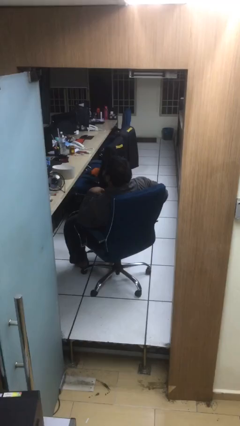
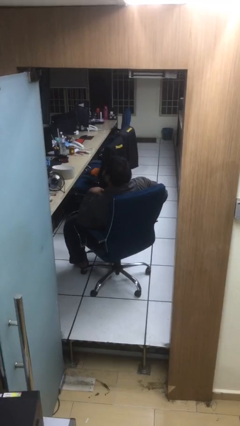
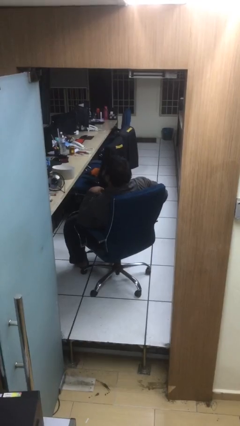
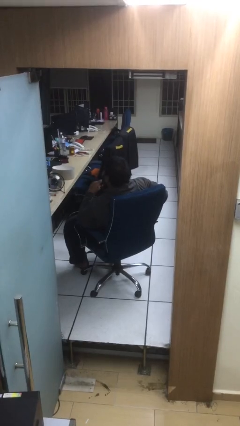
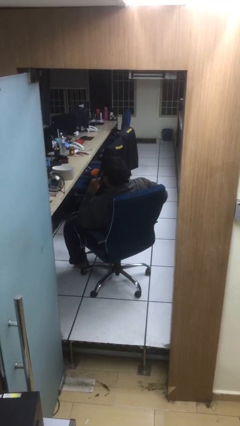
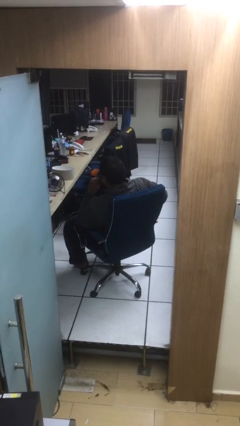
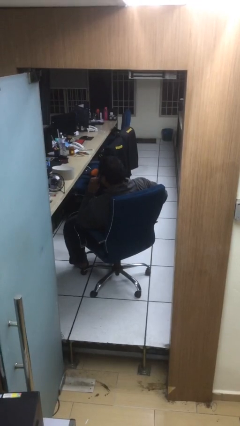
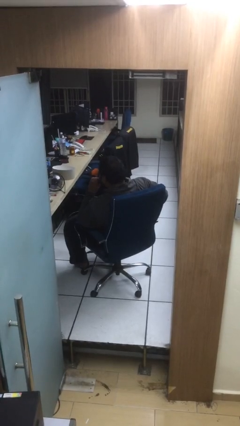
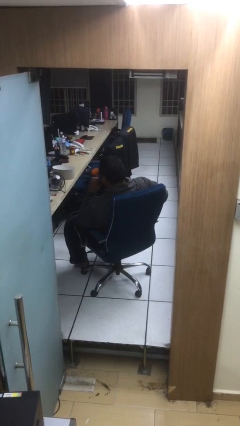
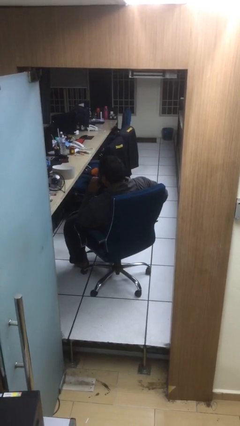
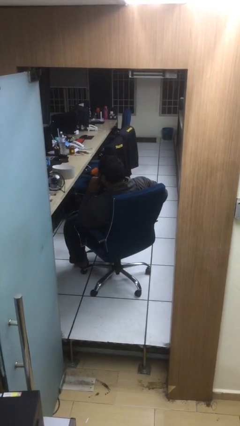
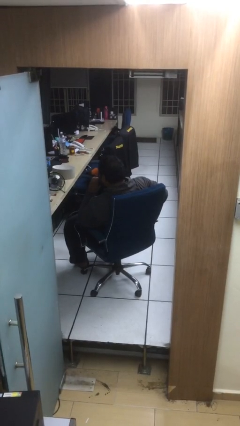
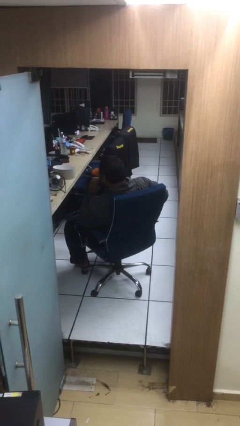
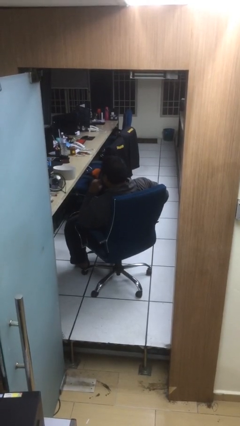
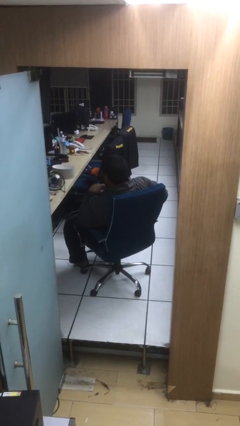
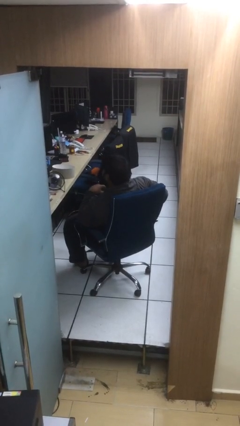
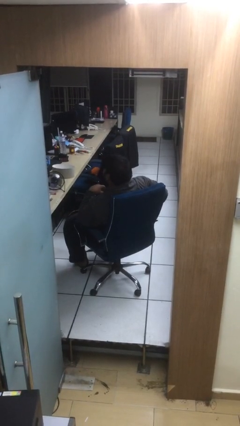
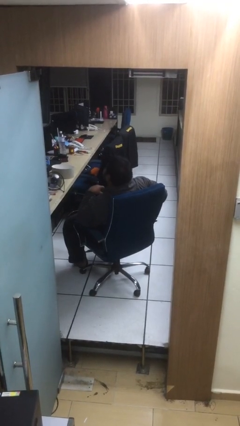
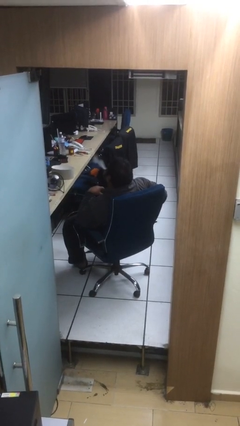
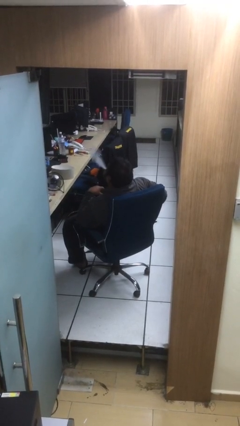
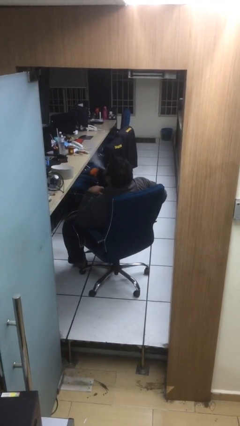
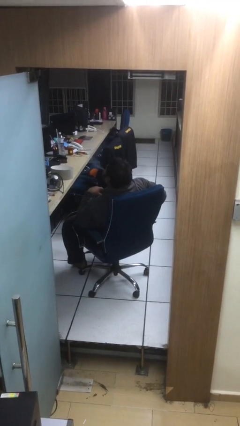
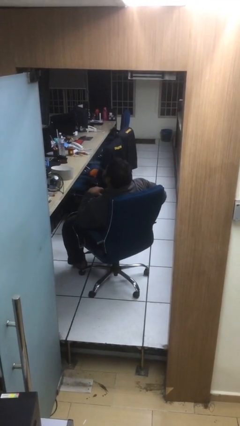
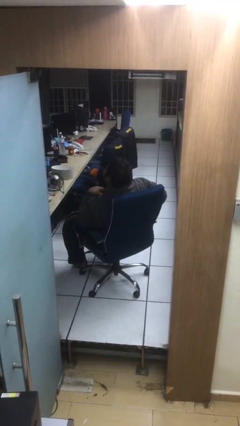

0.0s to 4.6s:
person vapes

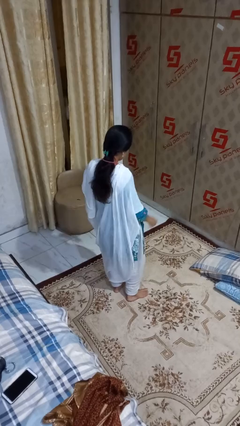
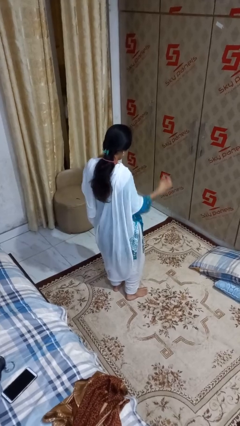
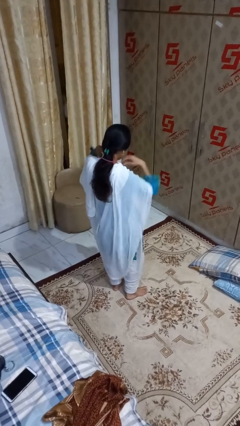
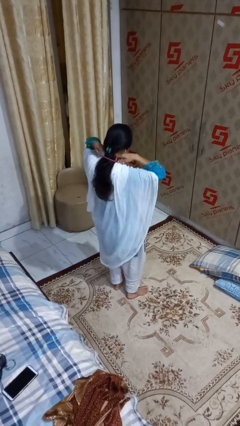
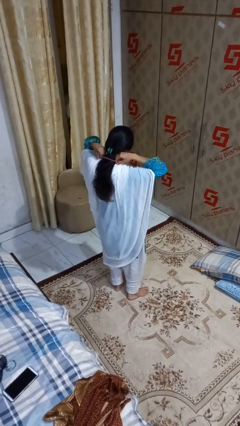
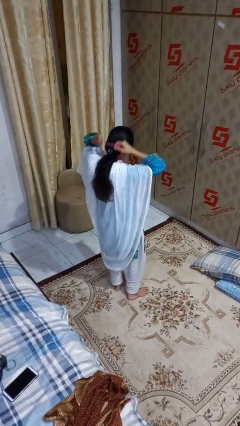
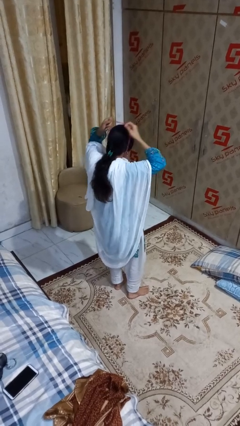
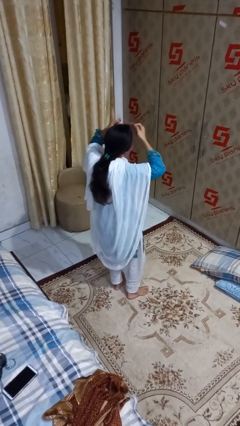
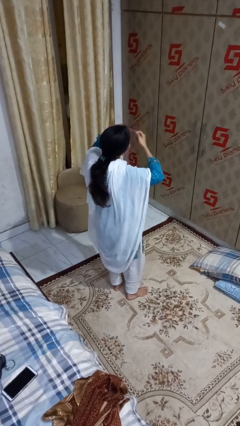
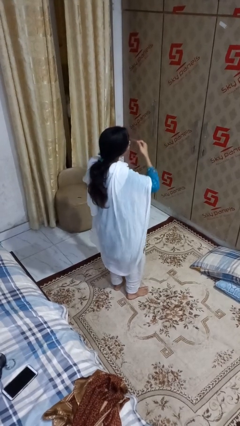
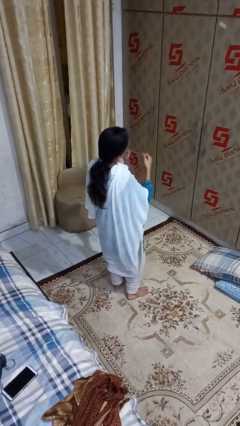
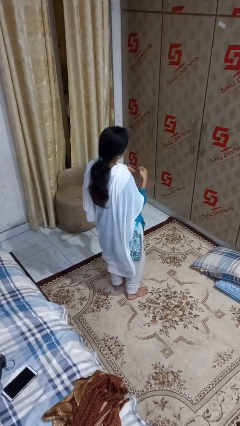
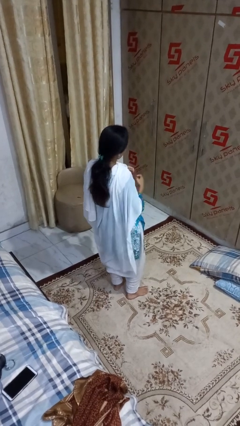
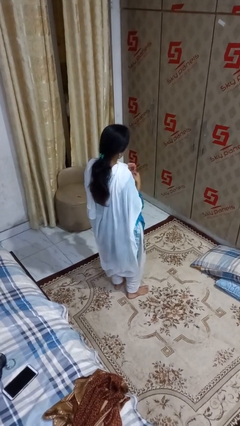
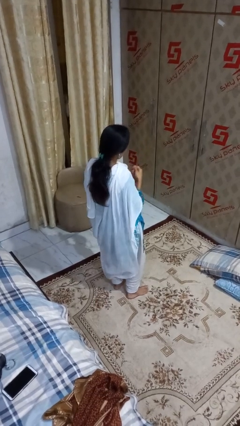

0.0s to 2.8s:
person takes off necklace

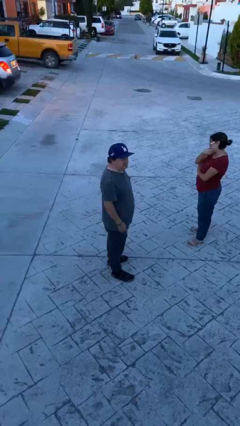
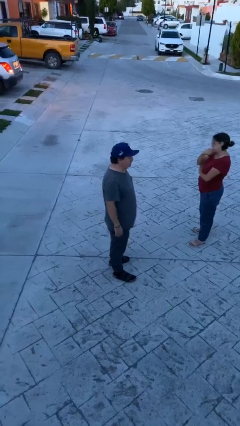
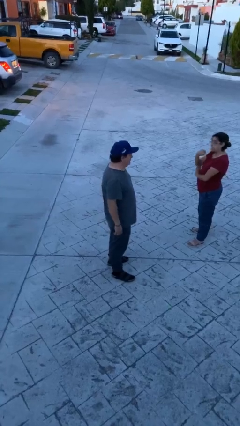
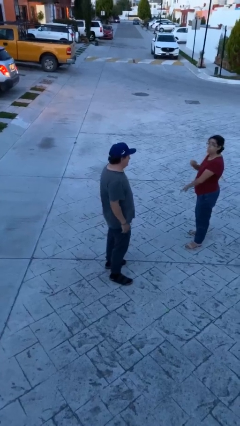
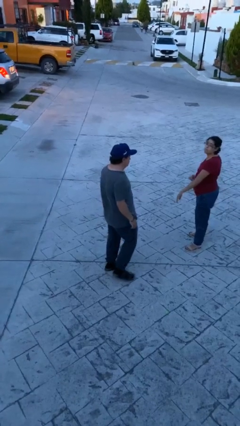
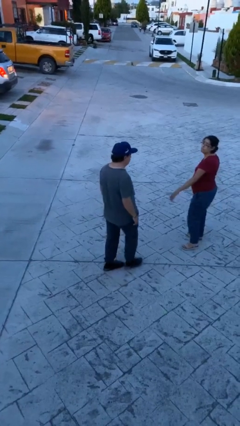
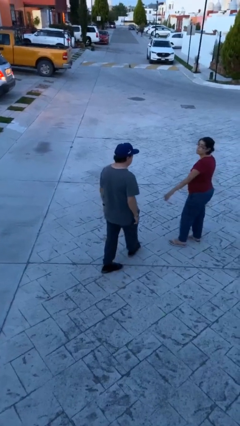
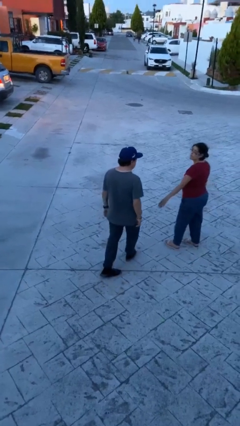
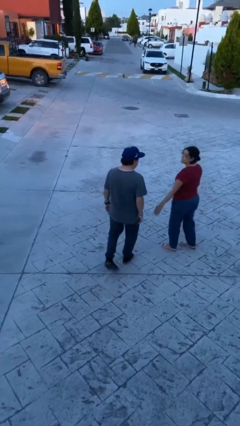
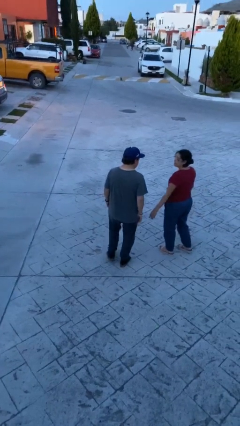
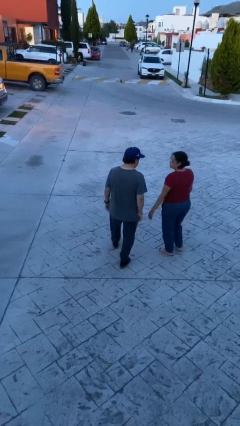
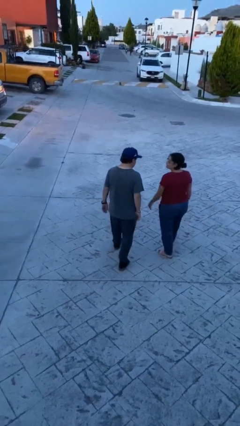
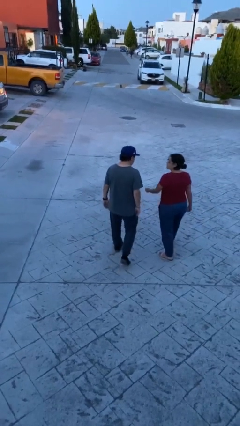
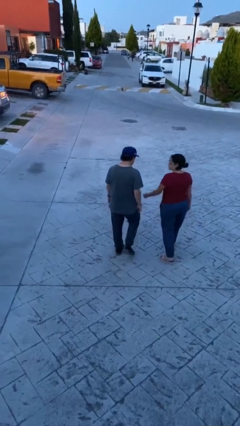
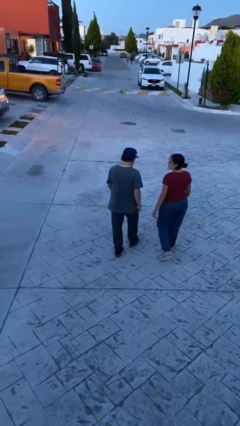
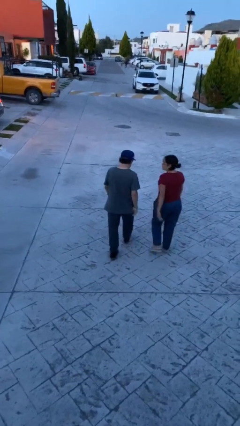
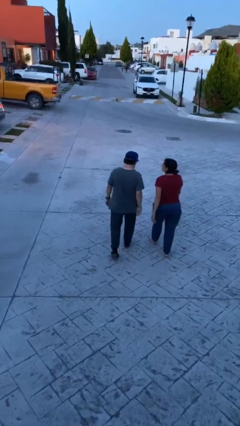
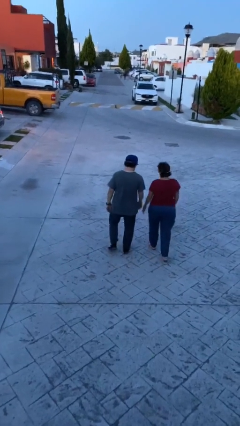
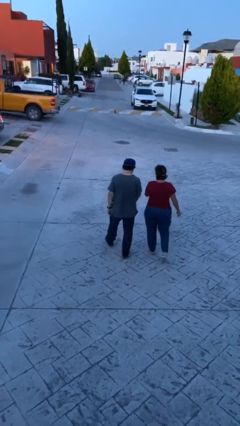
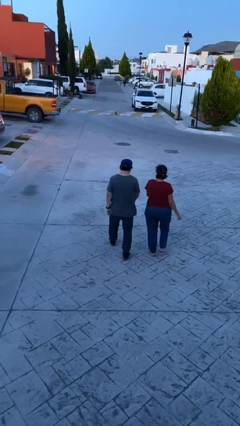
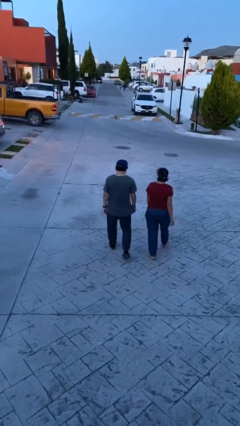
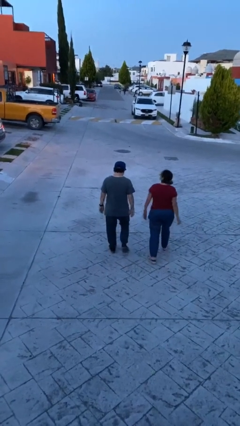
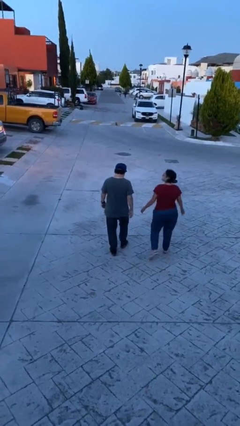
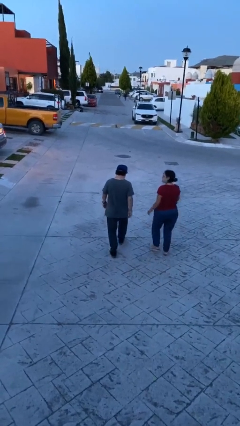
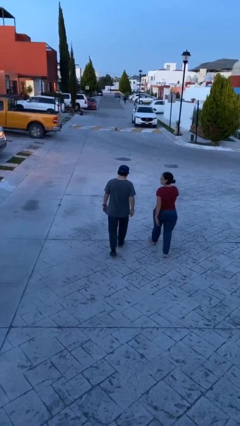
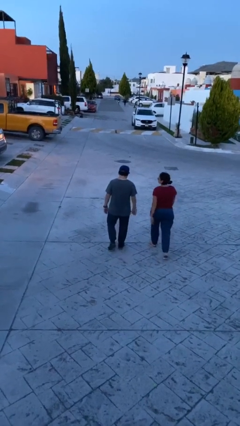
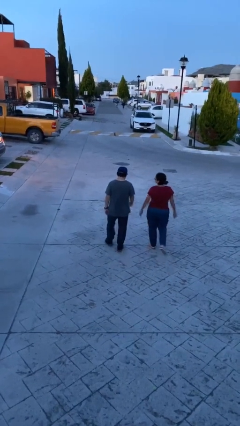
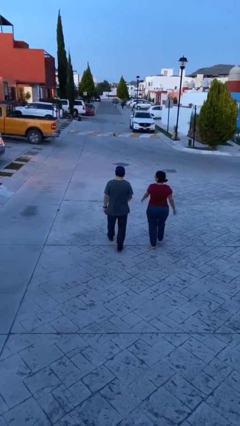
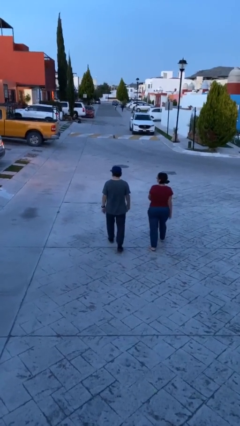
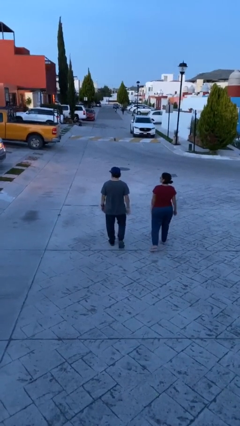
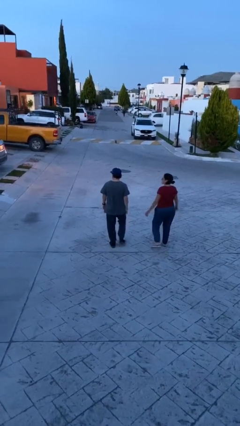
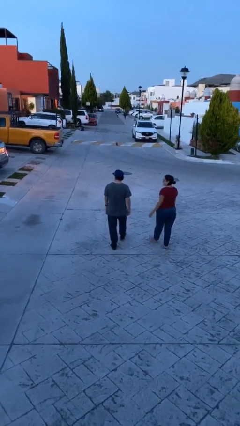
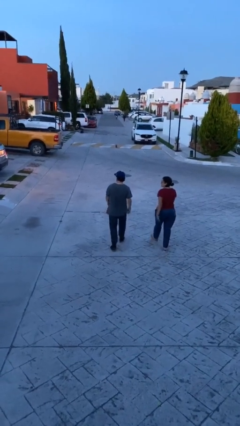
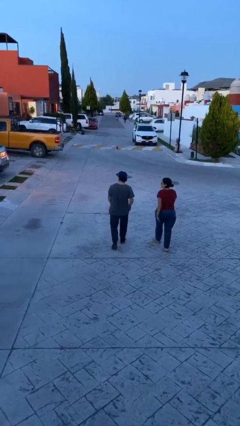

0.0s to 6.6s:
person talks to person

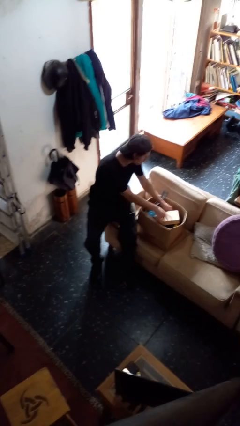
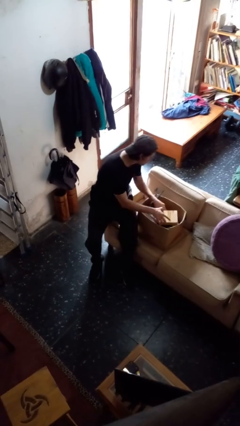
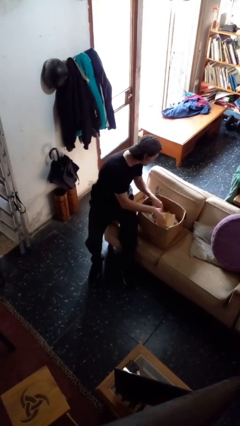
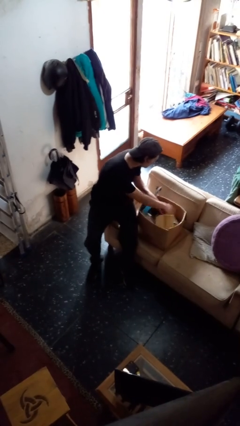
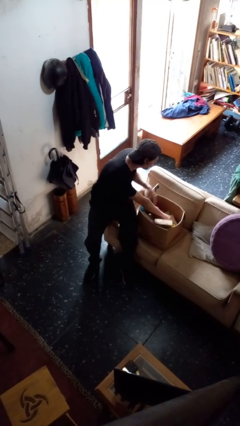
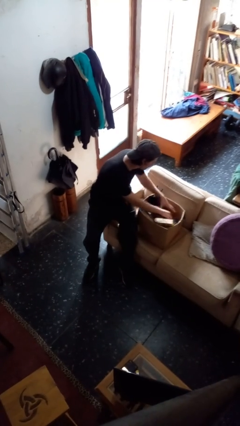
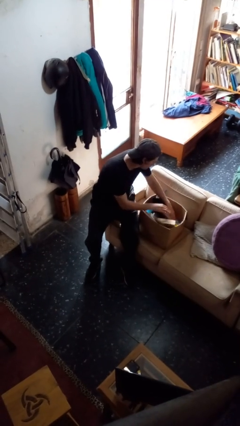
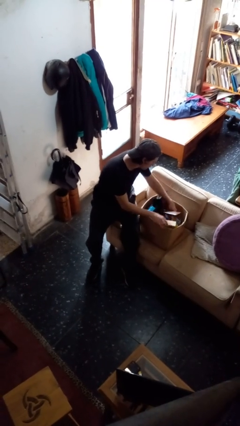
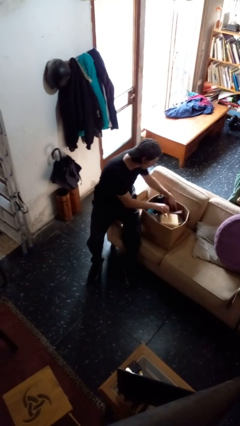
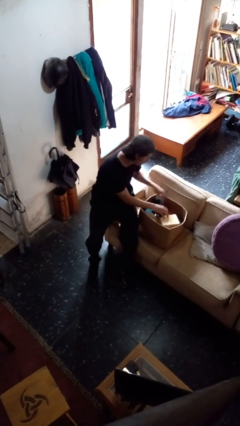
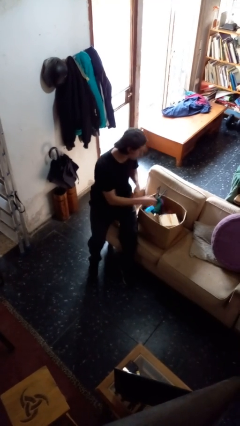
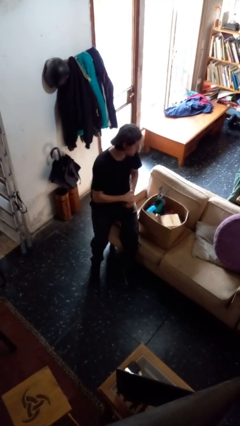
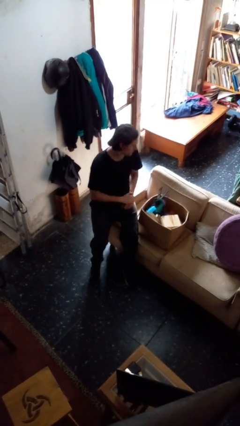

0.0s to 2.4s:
person searches in box

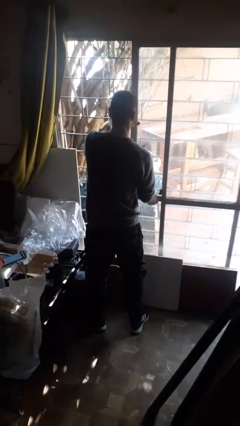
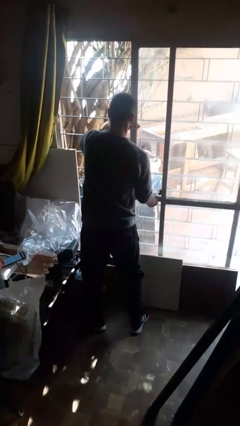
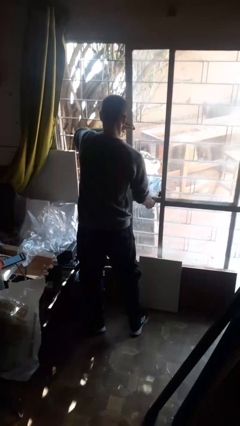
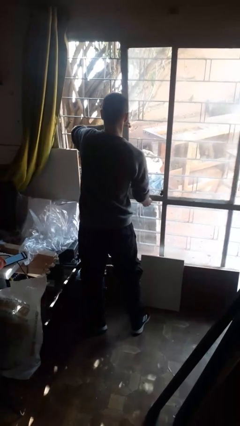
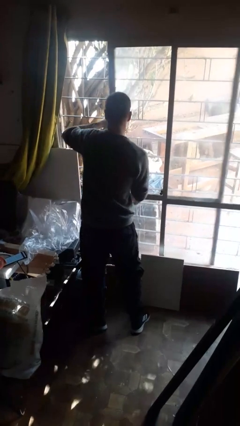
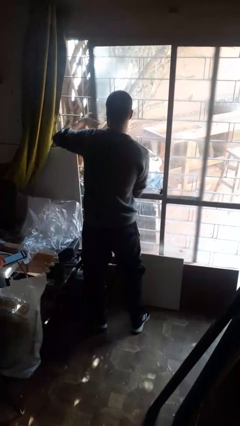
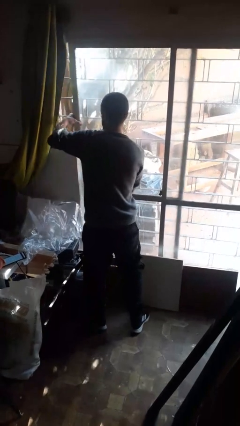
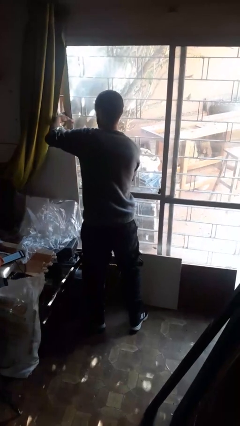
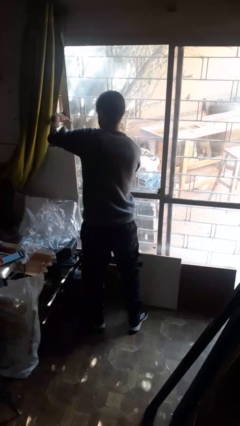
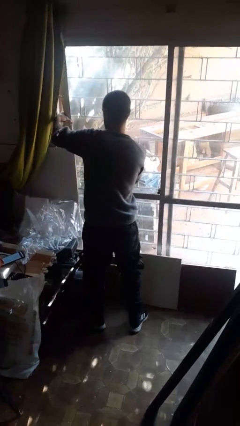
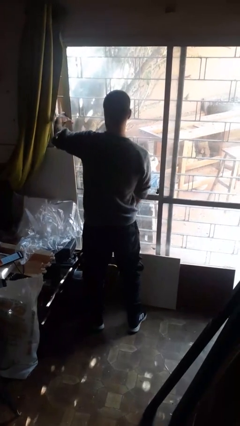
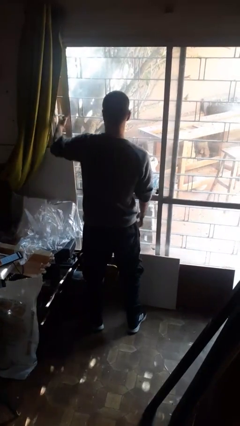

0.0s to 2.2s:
person closes sliding door
